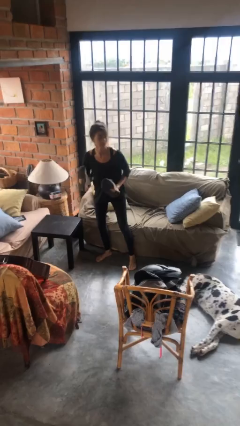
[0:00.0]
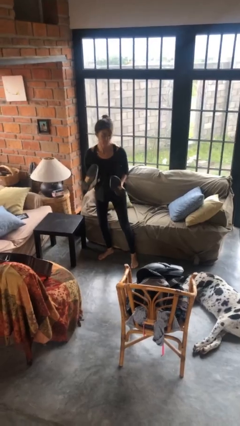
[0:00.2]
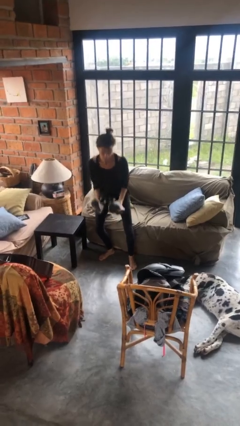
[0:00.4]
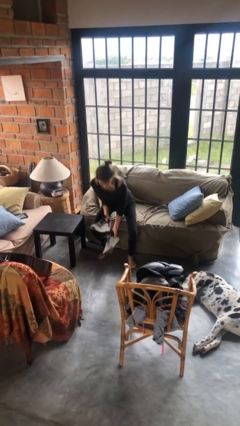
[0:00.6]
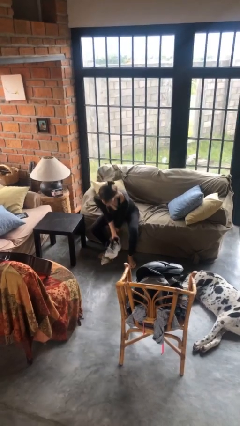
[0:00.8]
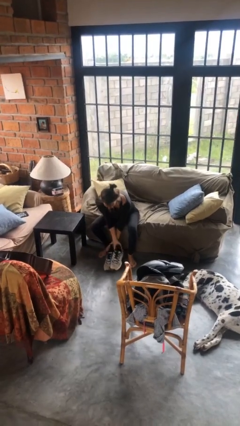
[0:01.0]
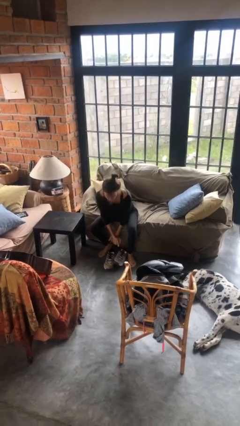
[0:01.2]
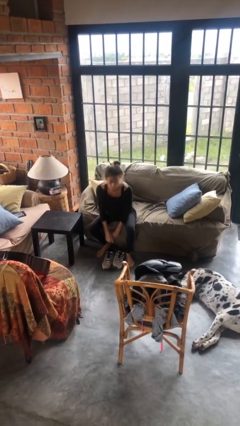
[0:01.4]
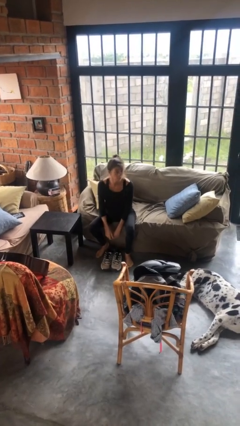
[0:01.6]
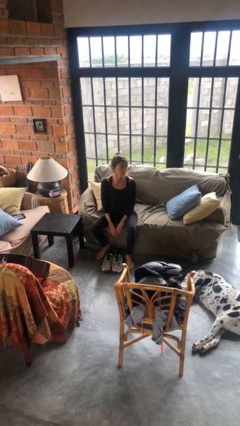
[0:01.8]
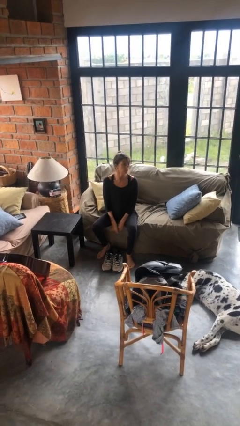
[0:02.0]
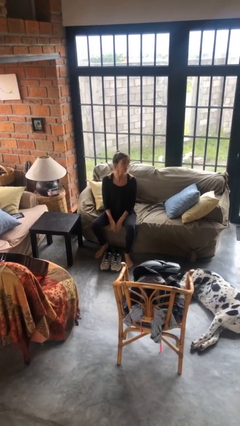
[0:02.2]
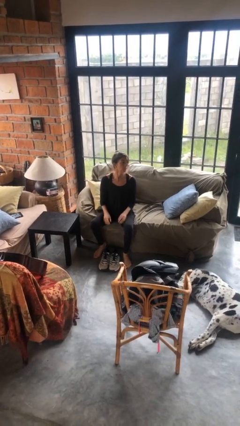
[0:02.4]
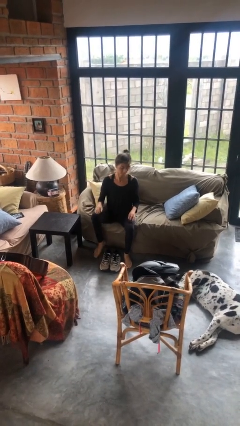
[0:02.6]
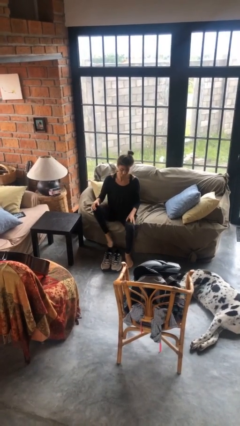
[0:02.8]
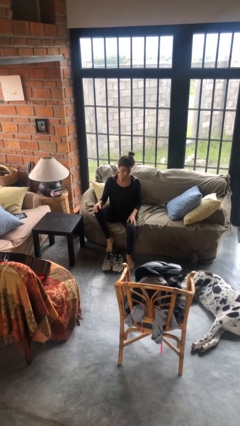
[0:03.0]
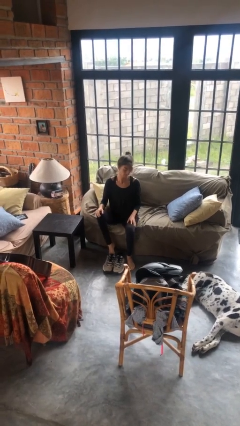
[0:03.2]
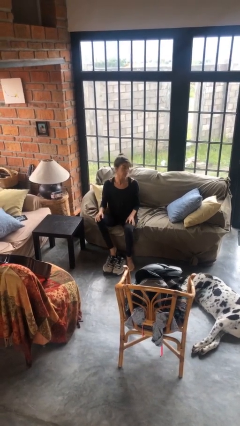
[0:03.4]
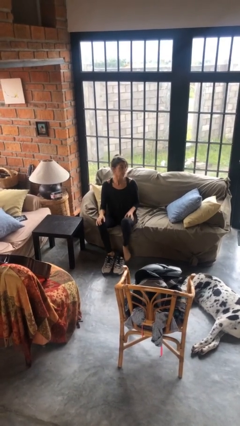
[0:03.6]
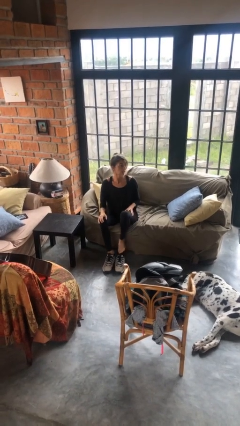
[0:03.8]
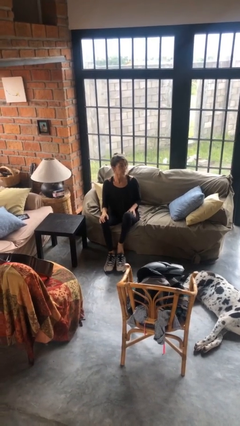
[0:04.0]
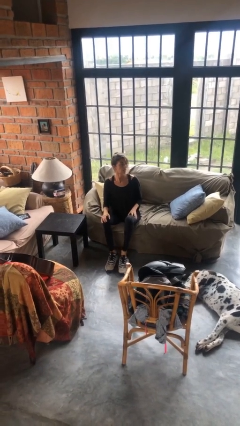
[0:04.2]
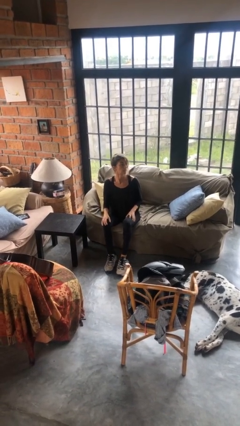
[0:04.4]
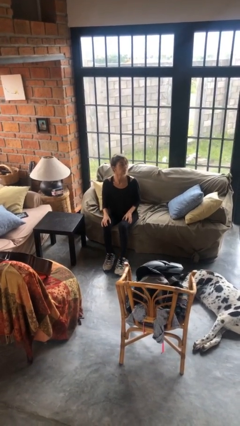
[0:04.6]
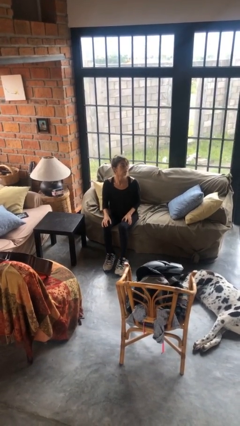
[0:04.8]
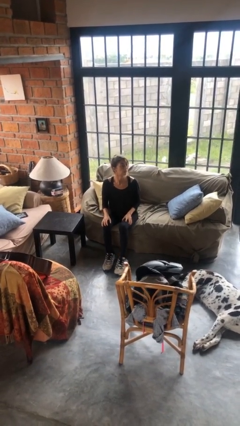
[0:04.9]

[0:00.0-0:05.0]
person puts on shoes

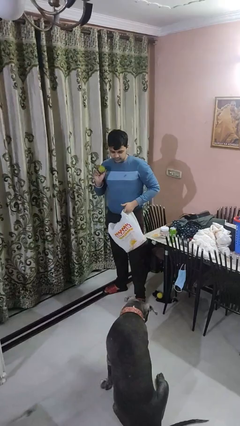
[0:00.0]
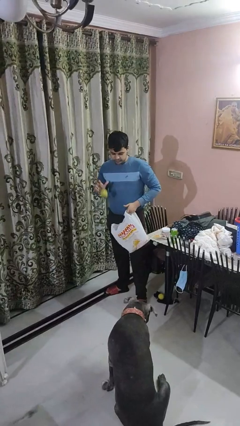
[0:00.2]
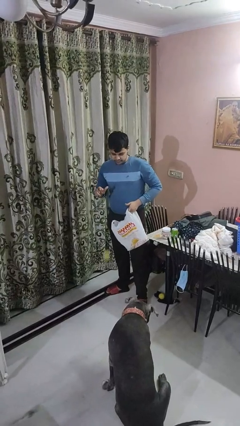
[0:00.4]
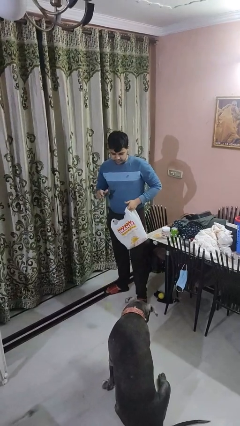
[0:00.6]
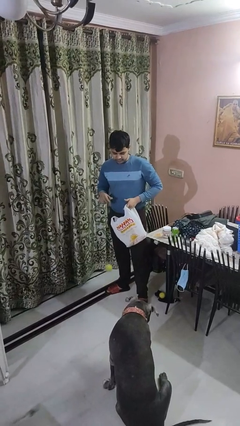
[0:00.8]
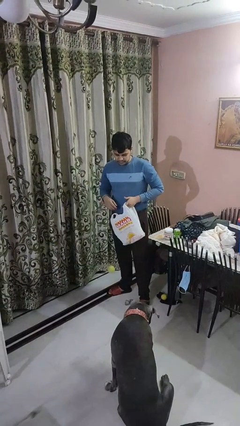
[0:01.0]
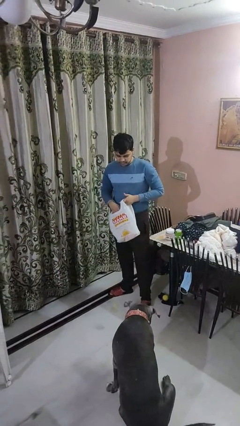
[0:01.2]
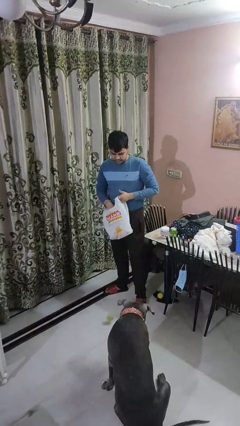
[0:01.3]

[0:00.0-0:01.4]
person throws object to dog

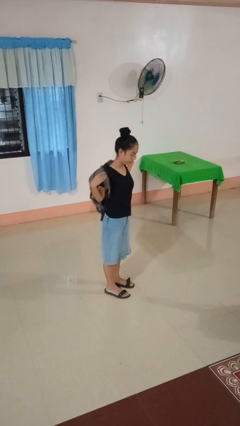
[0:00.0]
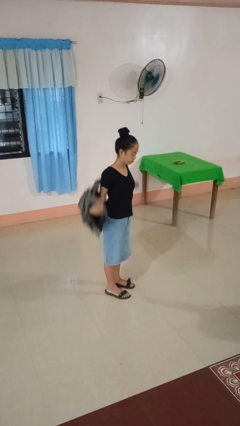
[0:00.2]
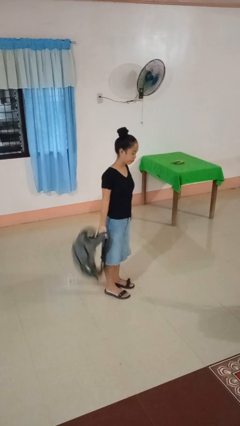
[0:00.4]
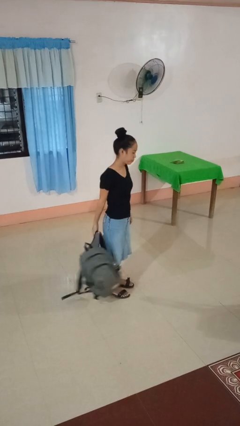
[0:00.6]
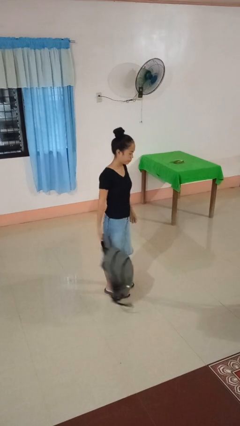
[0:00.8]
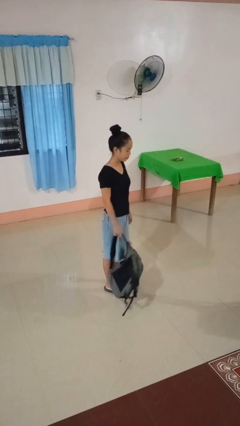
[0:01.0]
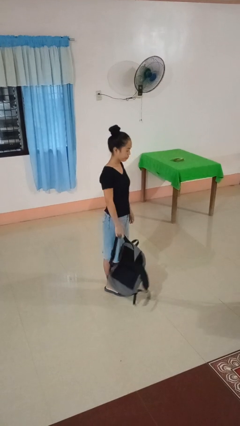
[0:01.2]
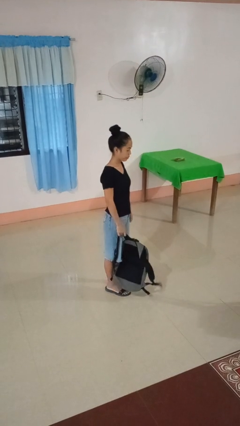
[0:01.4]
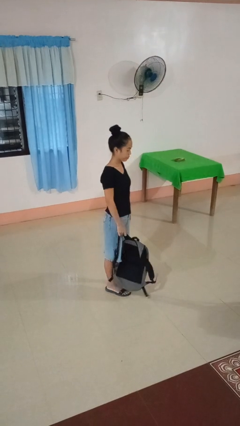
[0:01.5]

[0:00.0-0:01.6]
person takes off backpack

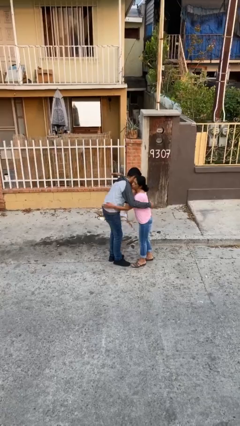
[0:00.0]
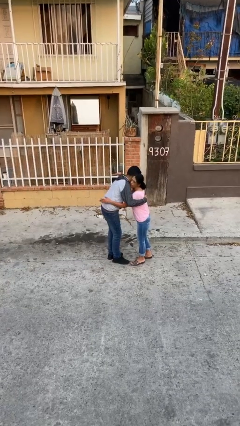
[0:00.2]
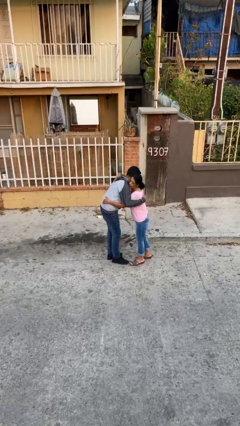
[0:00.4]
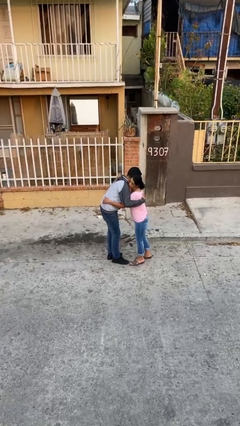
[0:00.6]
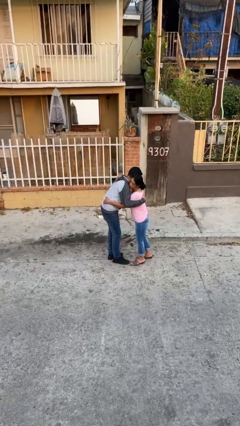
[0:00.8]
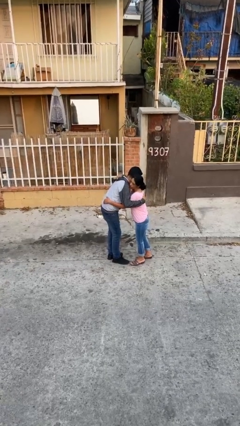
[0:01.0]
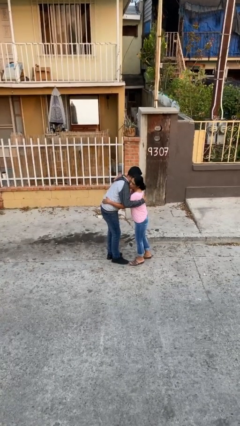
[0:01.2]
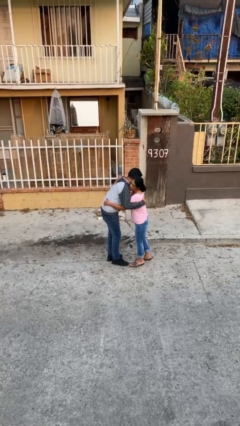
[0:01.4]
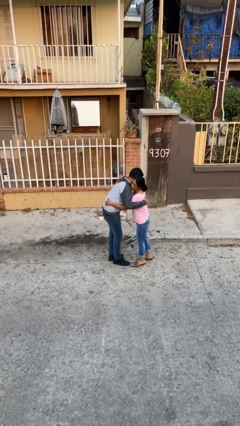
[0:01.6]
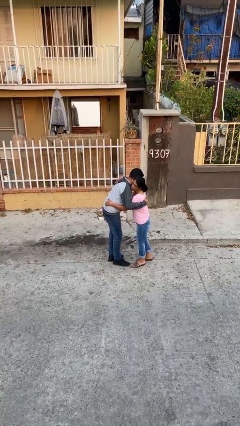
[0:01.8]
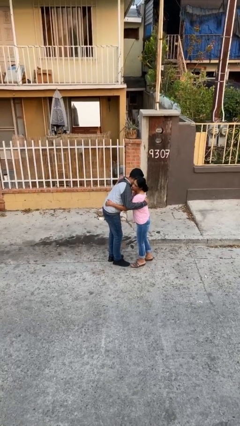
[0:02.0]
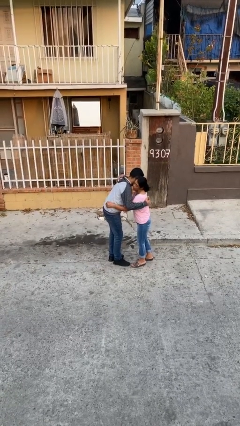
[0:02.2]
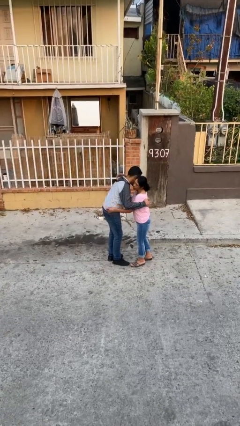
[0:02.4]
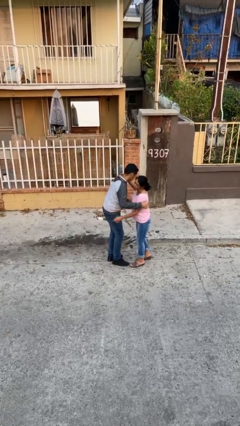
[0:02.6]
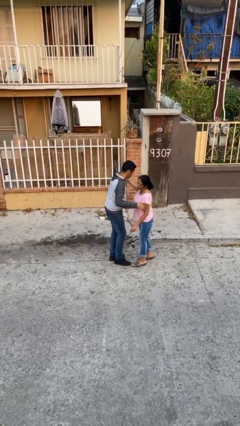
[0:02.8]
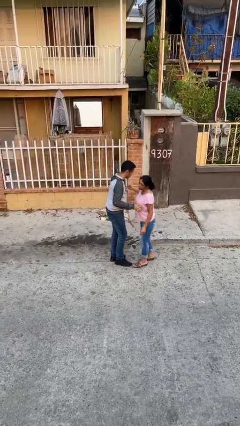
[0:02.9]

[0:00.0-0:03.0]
person embraces person

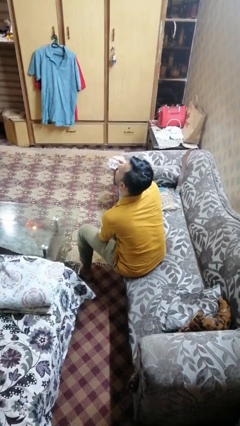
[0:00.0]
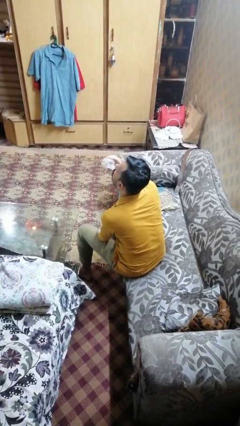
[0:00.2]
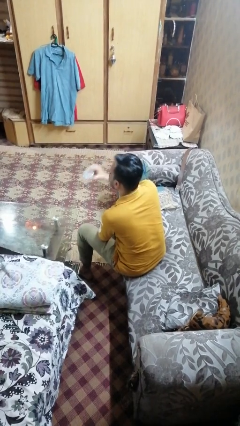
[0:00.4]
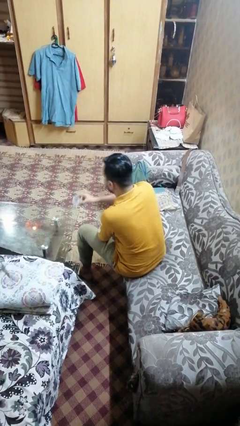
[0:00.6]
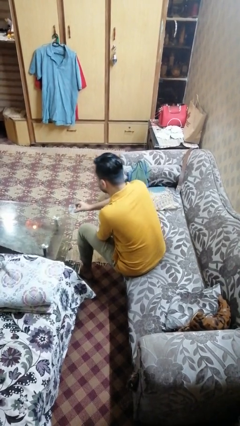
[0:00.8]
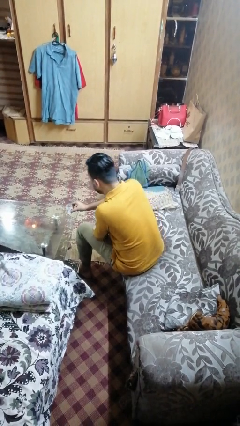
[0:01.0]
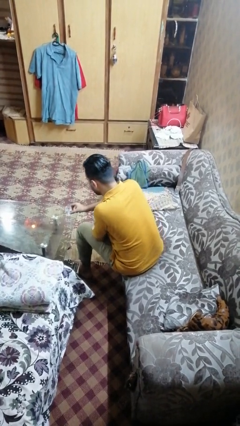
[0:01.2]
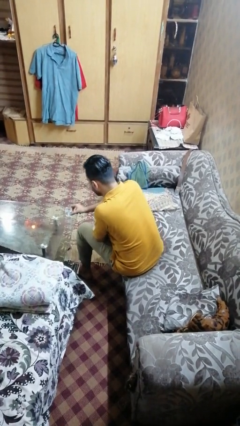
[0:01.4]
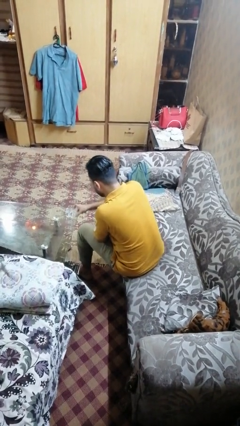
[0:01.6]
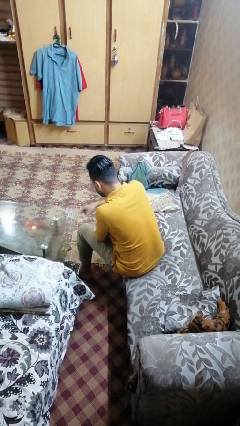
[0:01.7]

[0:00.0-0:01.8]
person puts down object on table

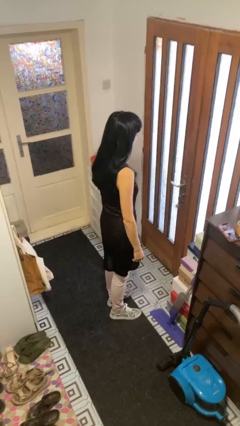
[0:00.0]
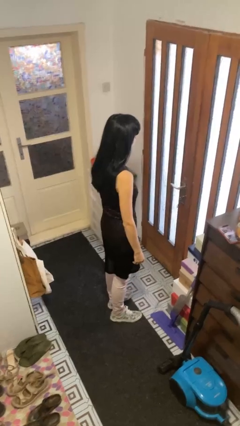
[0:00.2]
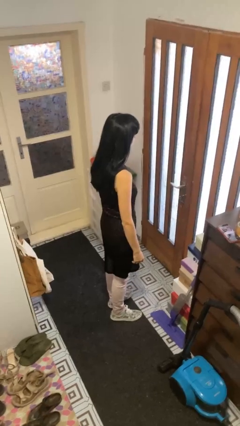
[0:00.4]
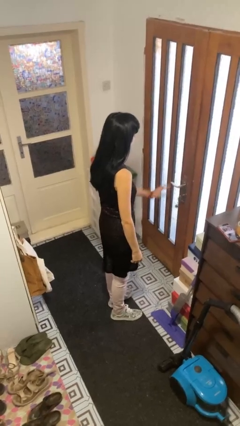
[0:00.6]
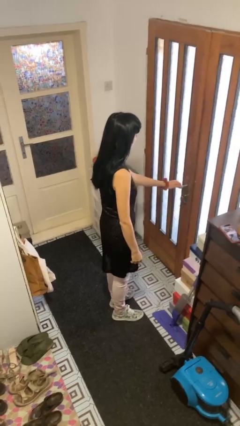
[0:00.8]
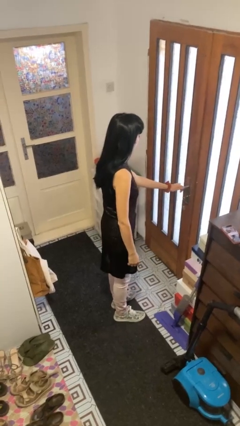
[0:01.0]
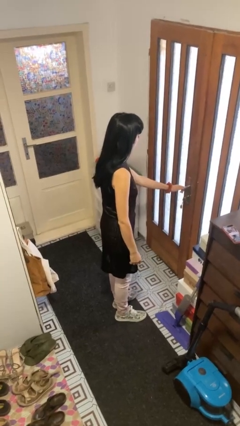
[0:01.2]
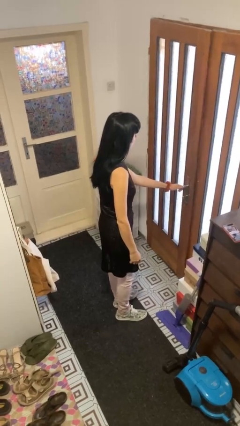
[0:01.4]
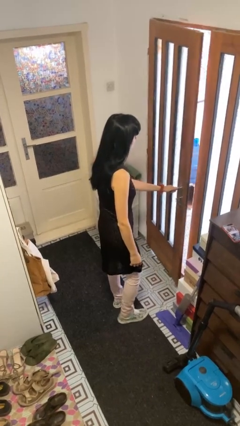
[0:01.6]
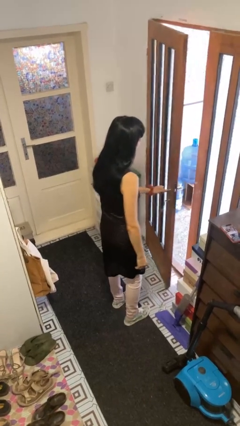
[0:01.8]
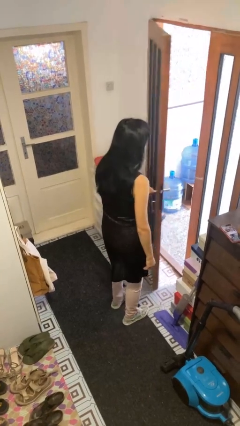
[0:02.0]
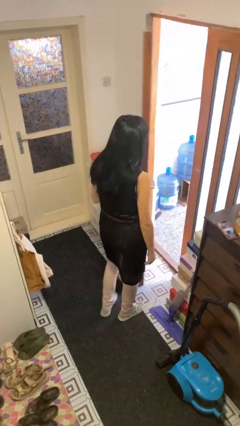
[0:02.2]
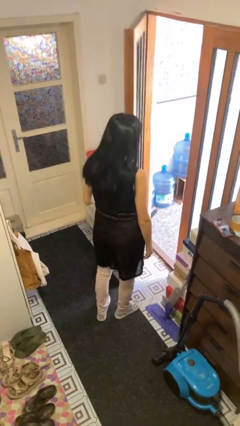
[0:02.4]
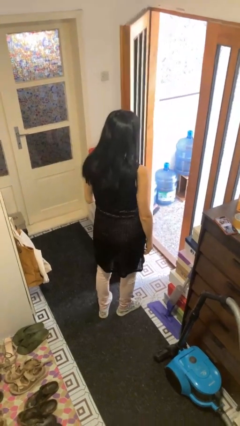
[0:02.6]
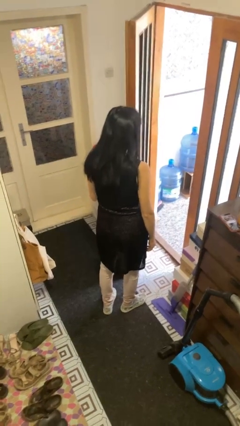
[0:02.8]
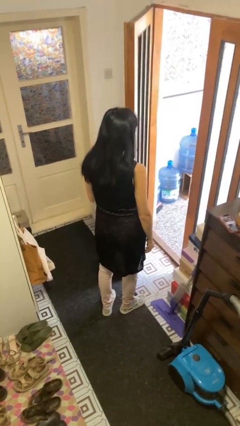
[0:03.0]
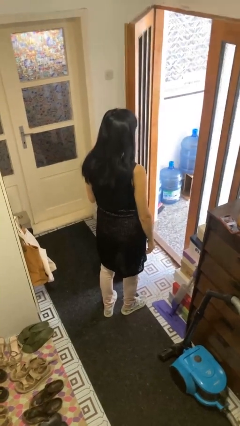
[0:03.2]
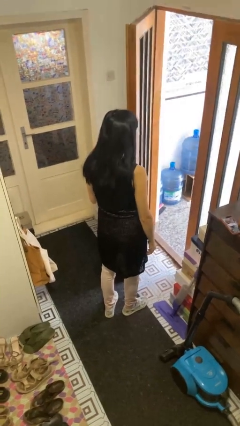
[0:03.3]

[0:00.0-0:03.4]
person opens facility door

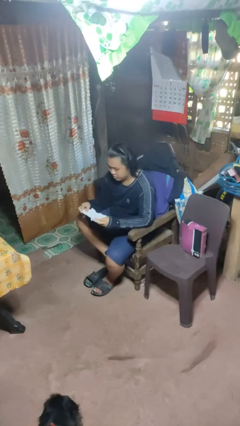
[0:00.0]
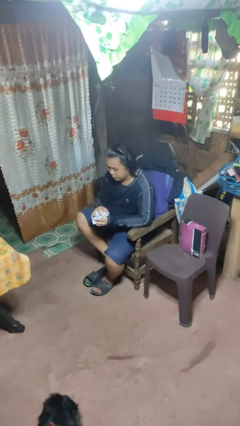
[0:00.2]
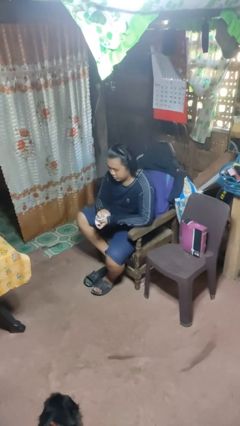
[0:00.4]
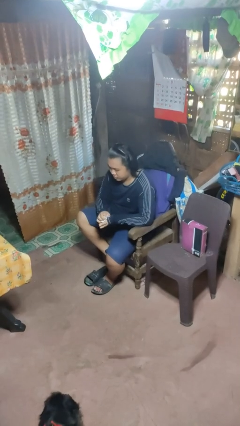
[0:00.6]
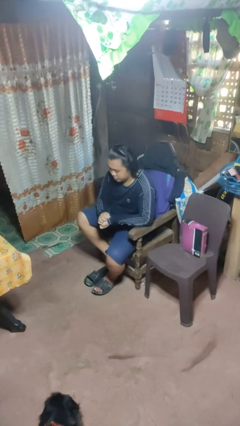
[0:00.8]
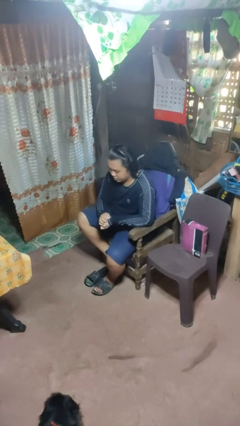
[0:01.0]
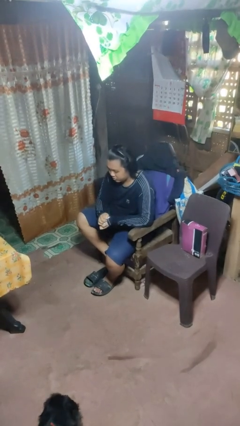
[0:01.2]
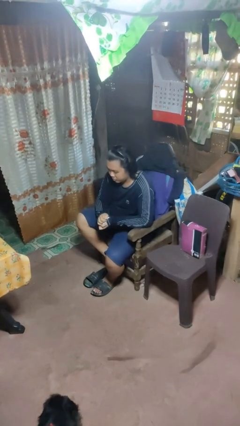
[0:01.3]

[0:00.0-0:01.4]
person crumples paper
